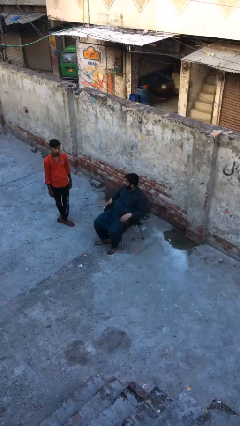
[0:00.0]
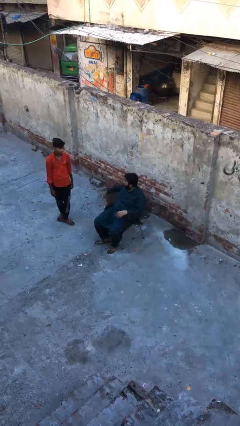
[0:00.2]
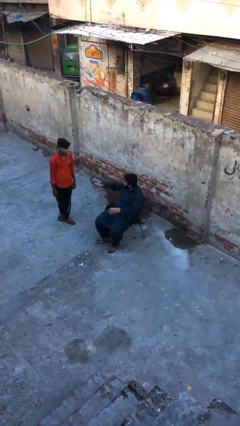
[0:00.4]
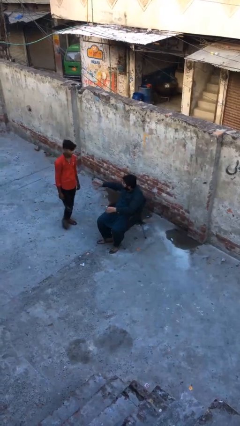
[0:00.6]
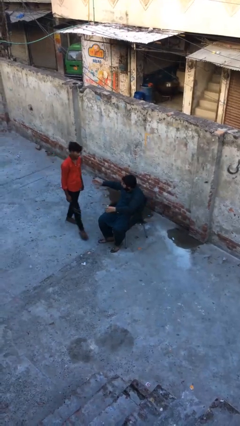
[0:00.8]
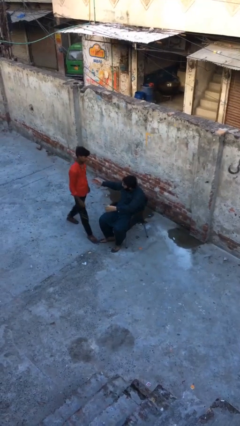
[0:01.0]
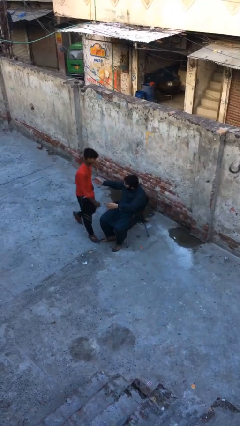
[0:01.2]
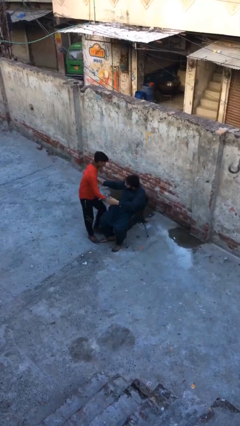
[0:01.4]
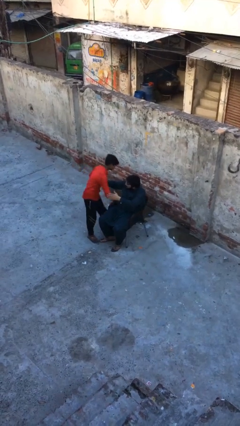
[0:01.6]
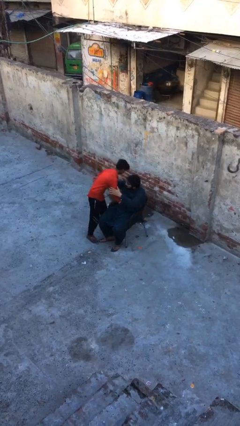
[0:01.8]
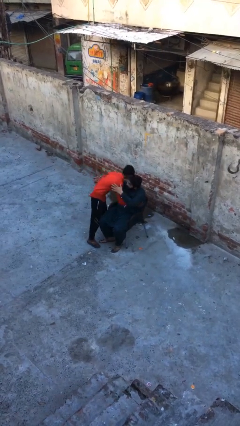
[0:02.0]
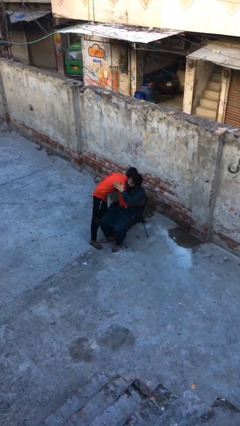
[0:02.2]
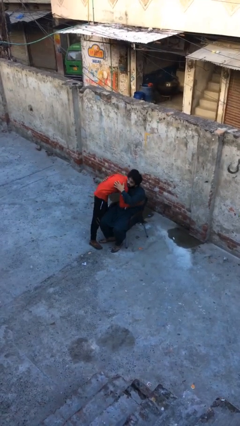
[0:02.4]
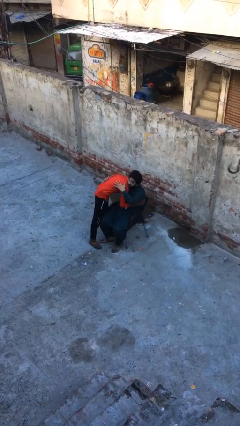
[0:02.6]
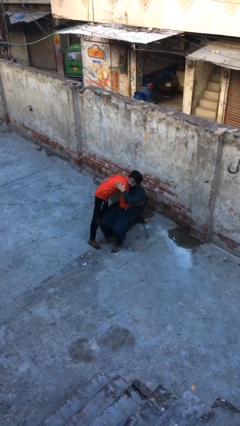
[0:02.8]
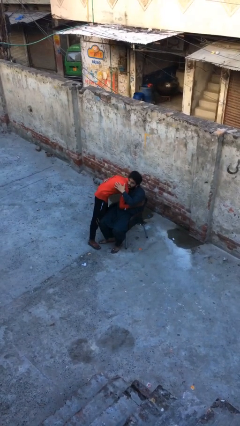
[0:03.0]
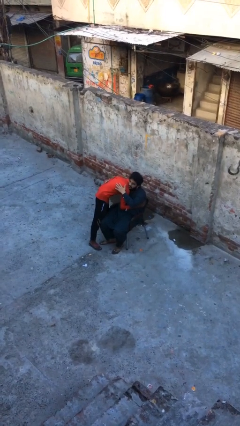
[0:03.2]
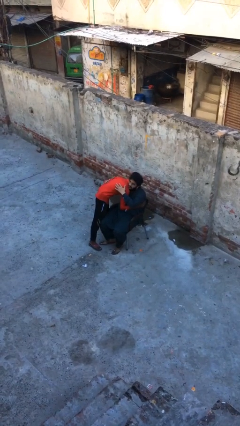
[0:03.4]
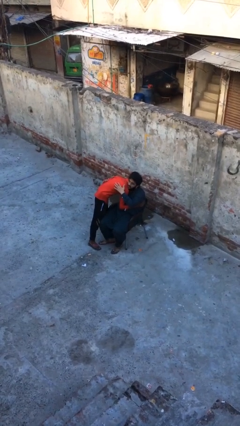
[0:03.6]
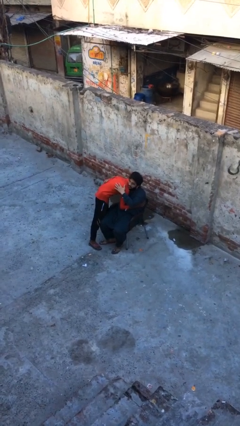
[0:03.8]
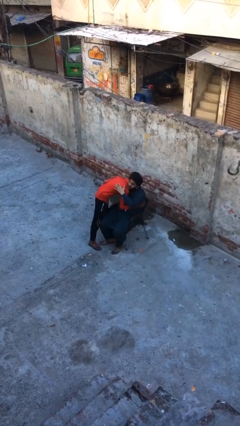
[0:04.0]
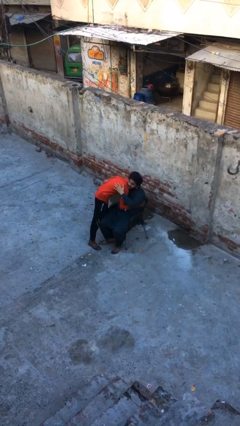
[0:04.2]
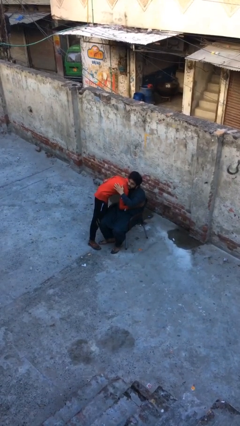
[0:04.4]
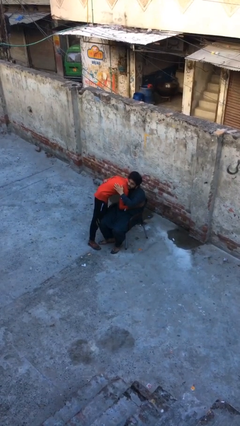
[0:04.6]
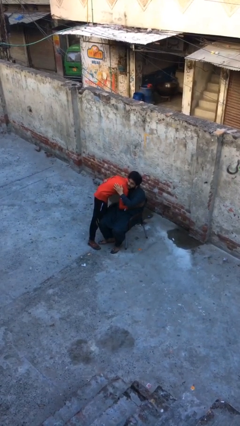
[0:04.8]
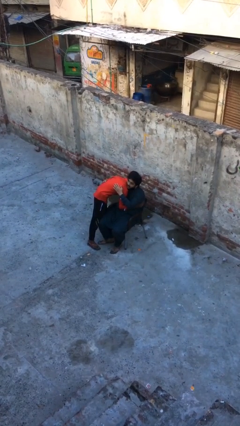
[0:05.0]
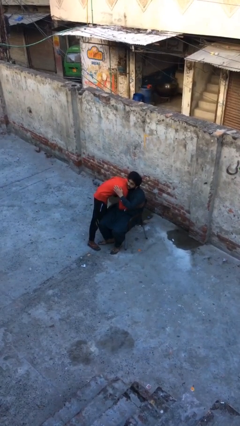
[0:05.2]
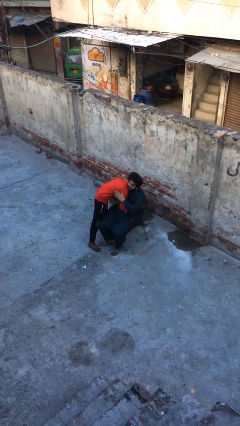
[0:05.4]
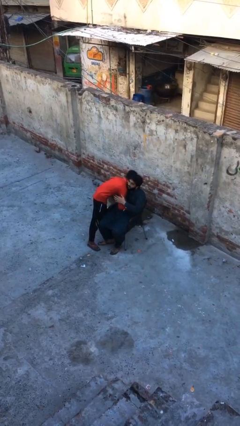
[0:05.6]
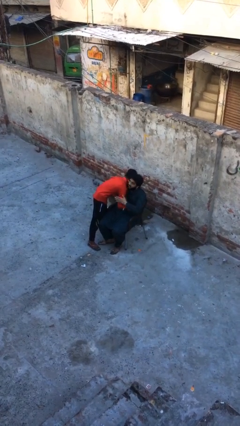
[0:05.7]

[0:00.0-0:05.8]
person embraces person

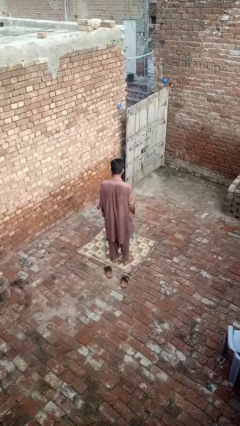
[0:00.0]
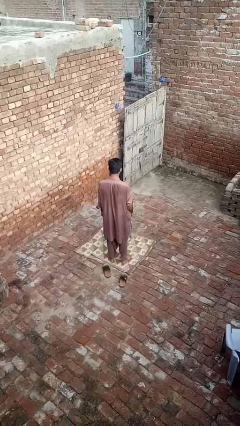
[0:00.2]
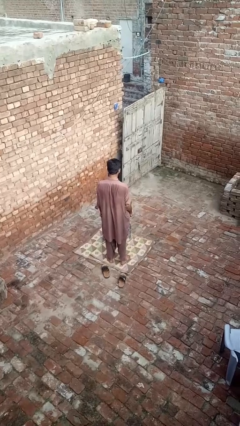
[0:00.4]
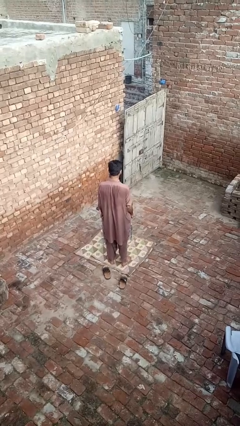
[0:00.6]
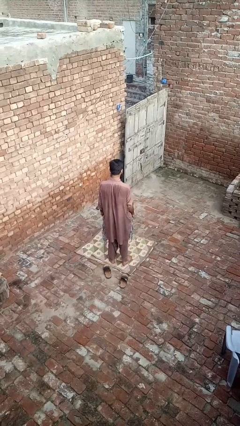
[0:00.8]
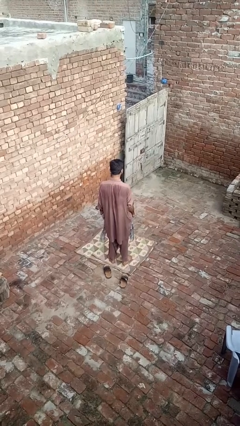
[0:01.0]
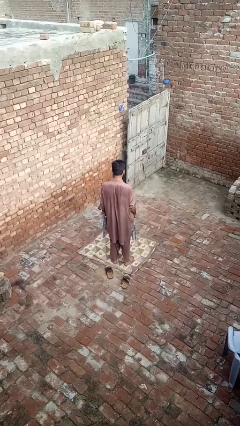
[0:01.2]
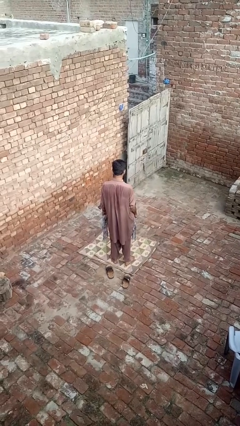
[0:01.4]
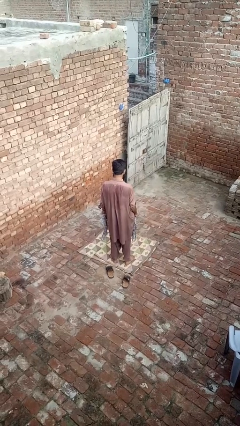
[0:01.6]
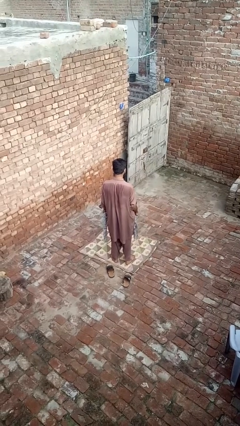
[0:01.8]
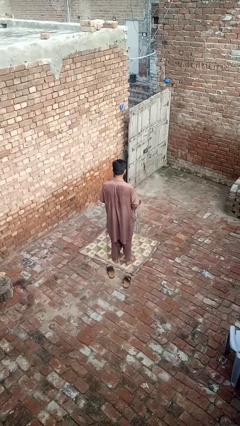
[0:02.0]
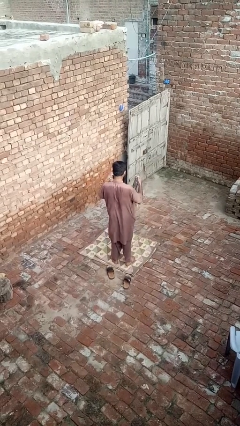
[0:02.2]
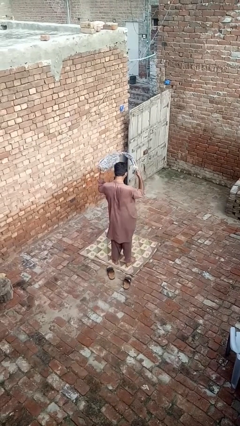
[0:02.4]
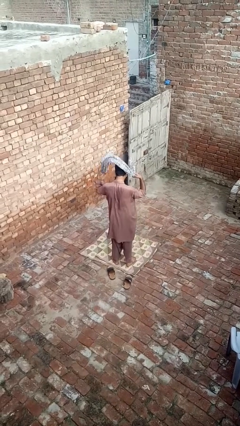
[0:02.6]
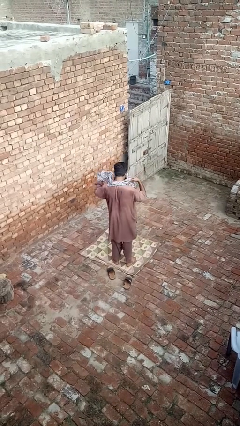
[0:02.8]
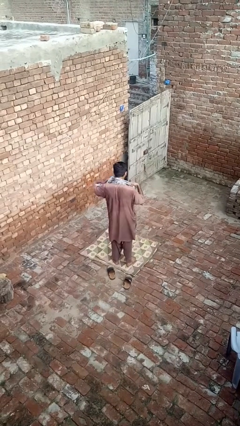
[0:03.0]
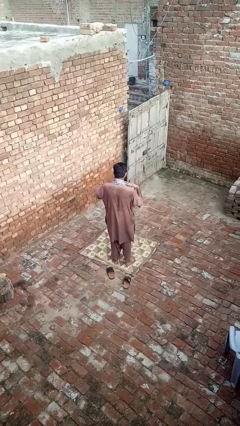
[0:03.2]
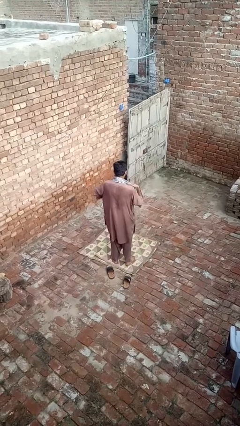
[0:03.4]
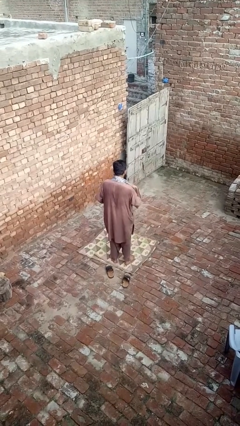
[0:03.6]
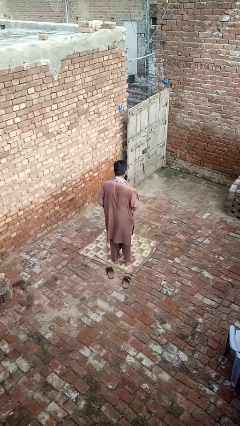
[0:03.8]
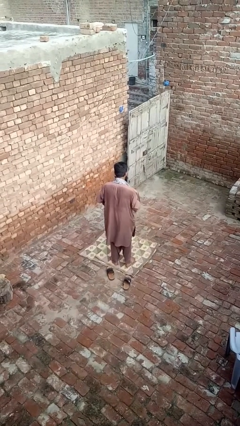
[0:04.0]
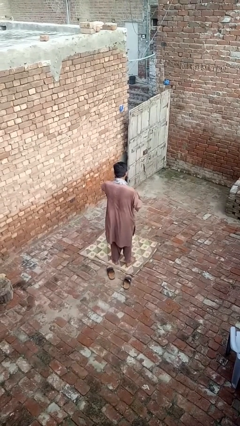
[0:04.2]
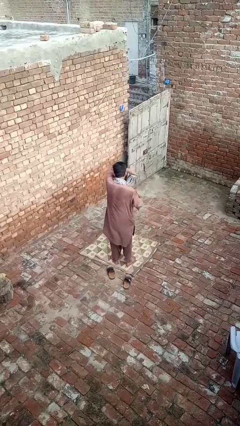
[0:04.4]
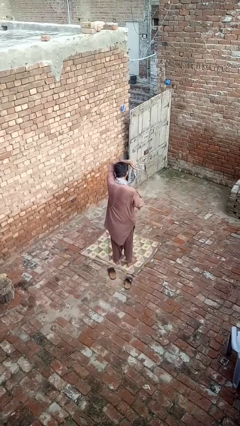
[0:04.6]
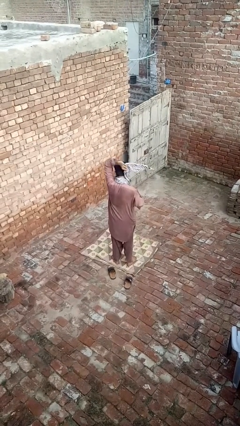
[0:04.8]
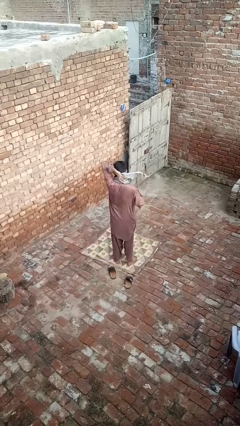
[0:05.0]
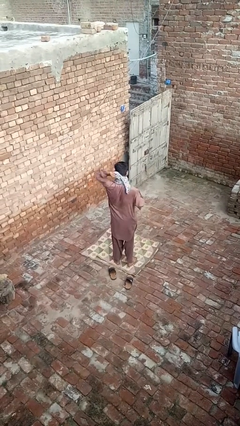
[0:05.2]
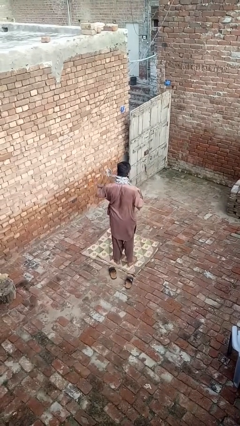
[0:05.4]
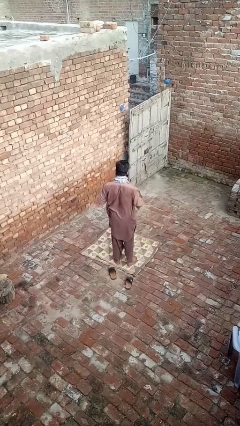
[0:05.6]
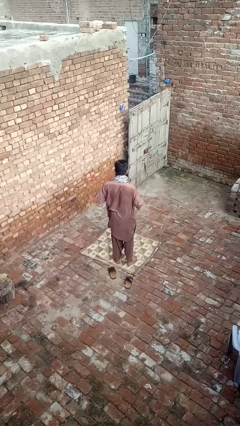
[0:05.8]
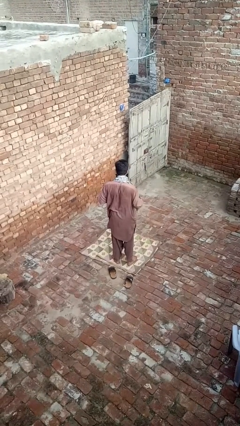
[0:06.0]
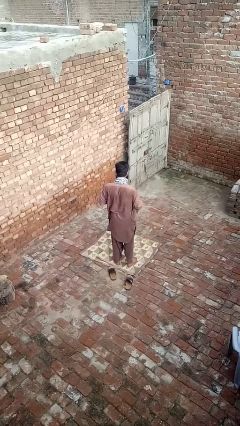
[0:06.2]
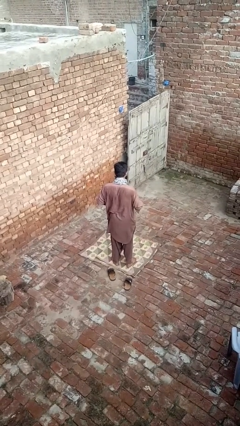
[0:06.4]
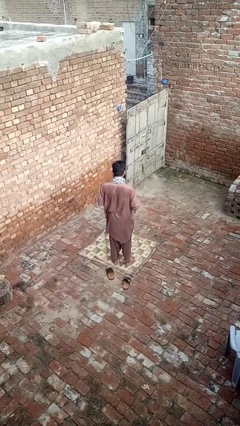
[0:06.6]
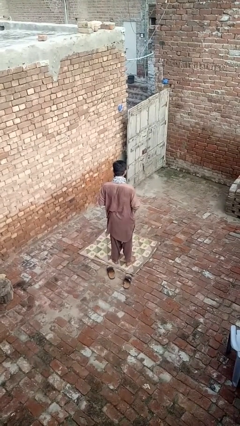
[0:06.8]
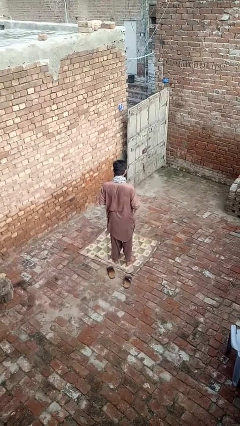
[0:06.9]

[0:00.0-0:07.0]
person puts on scarf

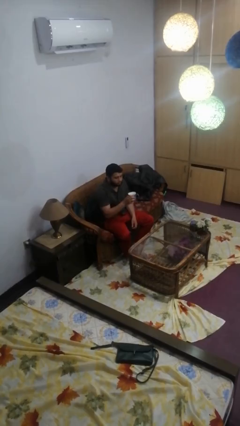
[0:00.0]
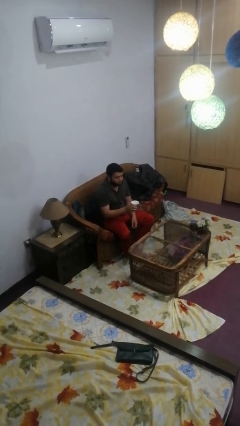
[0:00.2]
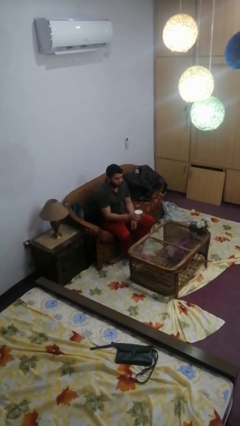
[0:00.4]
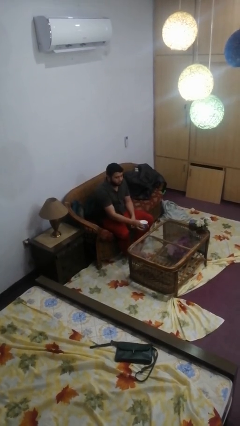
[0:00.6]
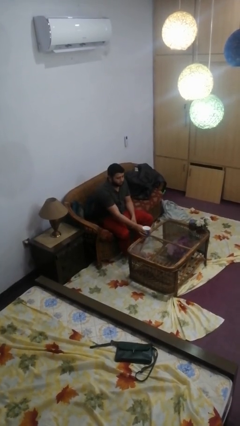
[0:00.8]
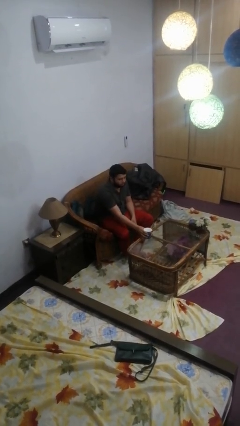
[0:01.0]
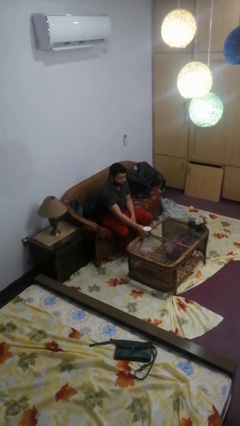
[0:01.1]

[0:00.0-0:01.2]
person puts down object on table

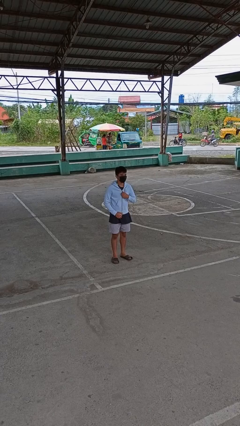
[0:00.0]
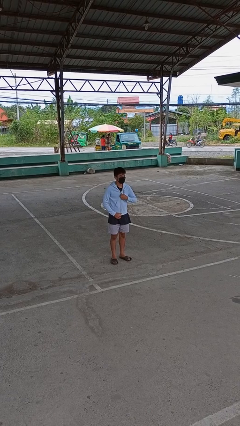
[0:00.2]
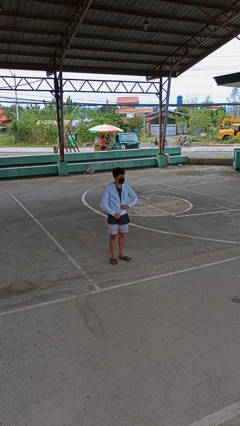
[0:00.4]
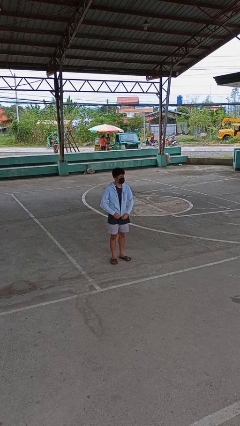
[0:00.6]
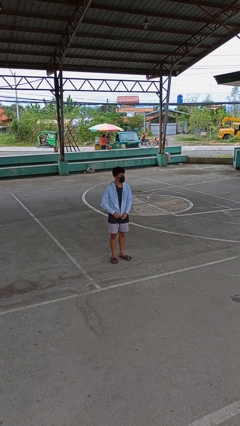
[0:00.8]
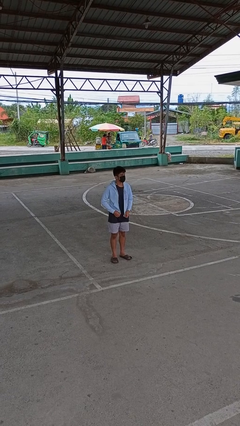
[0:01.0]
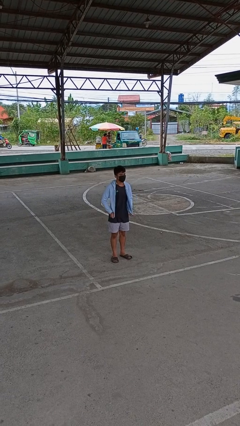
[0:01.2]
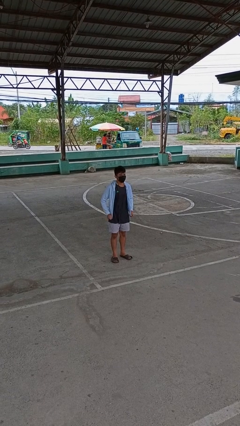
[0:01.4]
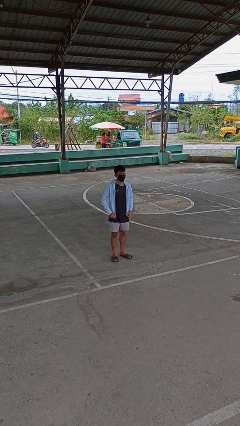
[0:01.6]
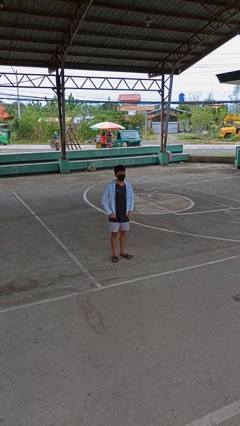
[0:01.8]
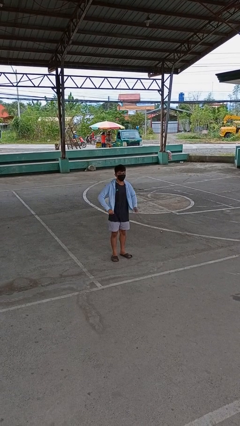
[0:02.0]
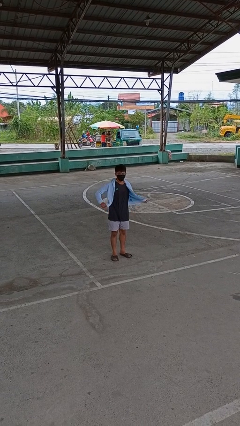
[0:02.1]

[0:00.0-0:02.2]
person unzips jacket

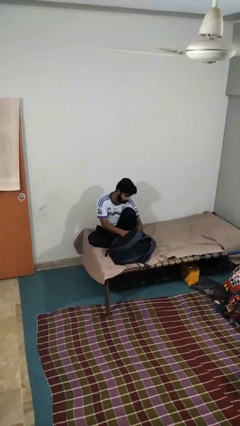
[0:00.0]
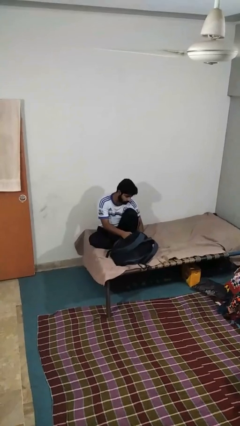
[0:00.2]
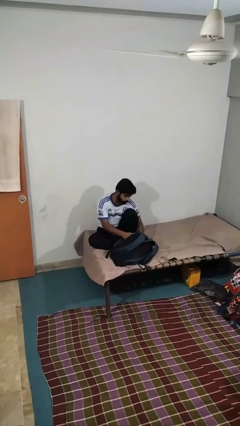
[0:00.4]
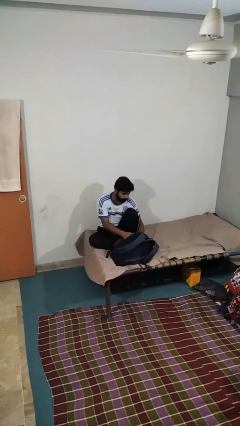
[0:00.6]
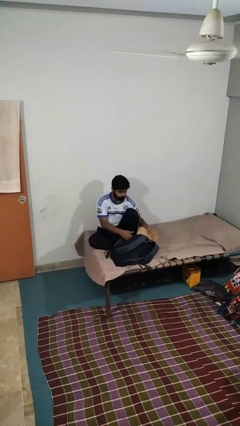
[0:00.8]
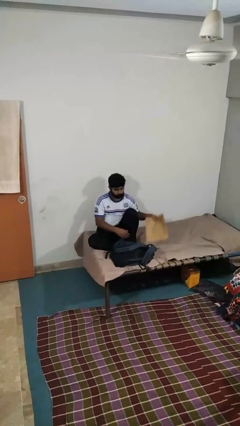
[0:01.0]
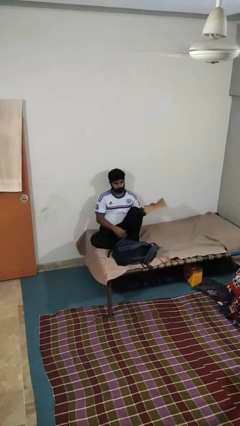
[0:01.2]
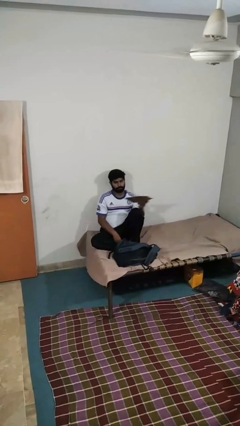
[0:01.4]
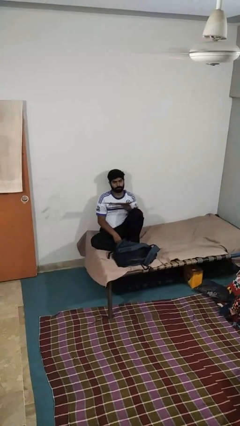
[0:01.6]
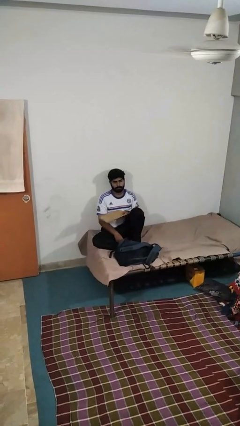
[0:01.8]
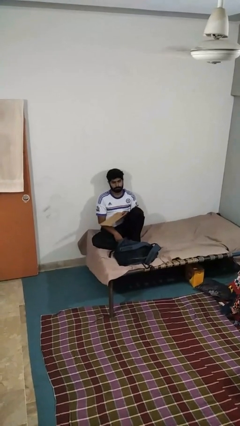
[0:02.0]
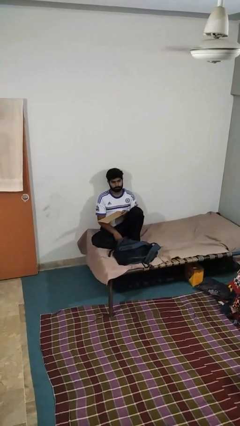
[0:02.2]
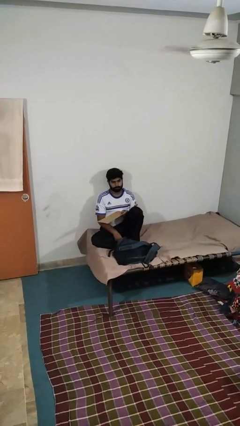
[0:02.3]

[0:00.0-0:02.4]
person takes object from backpack
